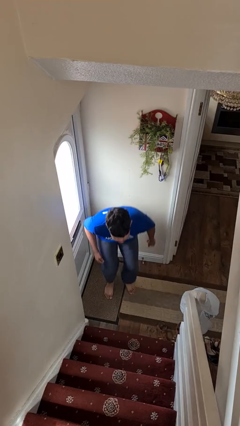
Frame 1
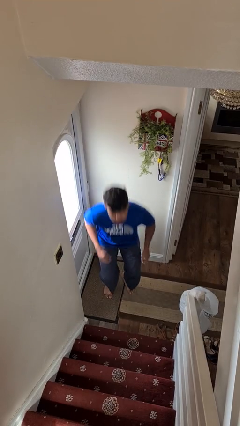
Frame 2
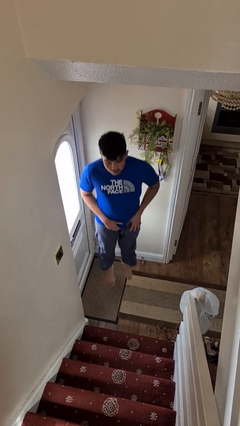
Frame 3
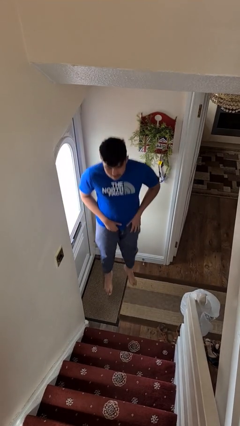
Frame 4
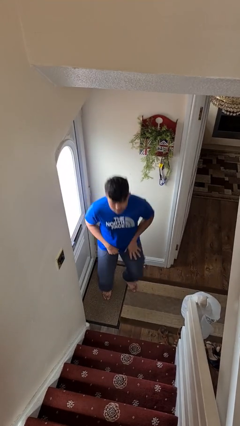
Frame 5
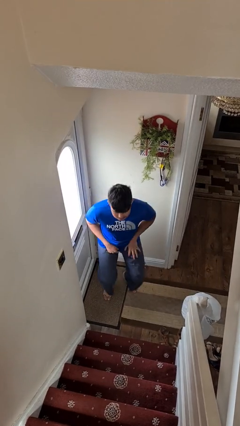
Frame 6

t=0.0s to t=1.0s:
person jumps

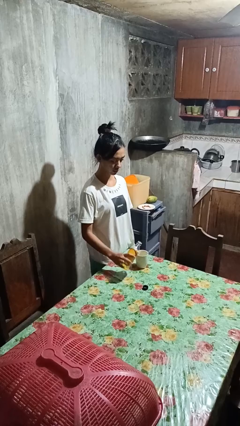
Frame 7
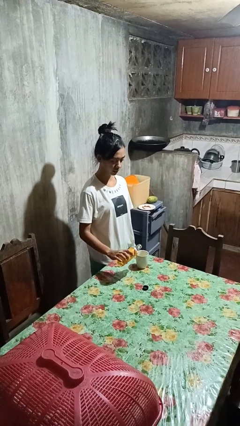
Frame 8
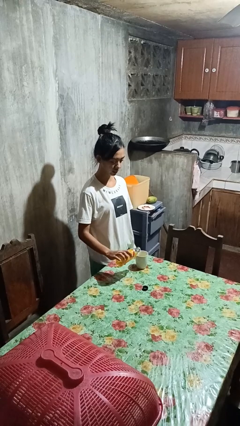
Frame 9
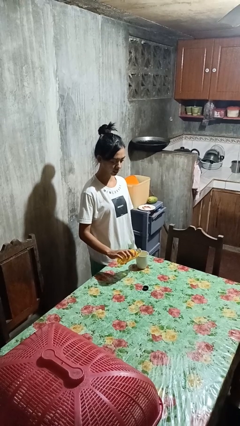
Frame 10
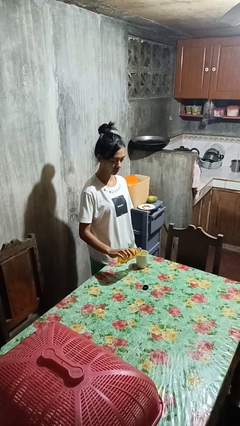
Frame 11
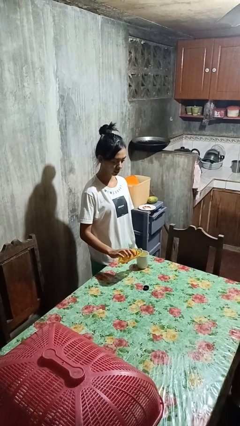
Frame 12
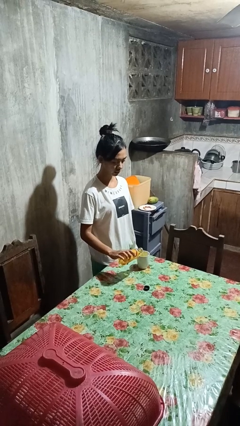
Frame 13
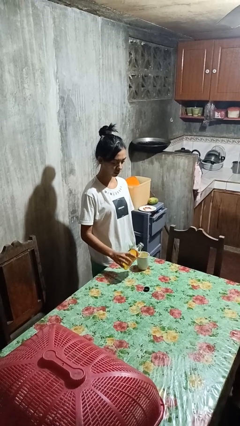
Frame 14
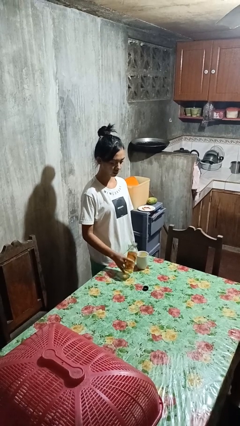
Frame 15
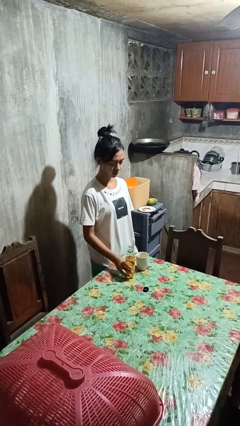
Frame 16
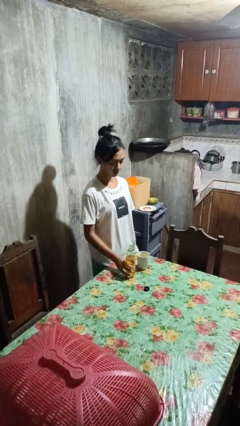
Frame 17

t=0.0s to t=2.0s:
person pours liquid into cup

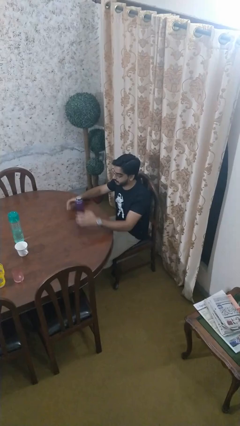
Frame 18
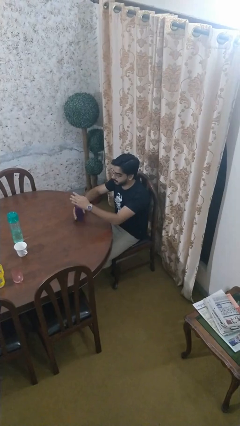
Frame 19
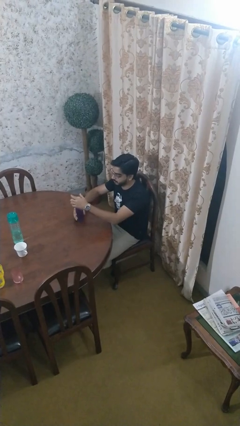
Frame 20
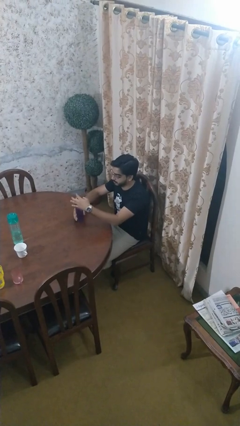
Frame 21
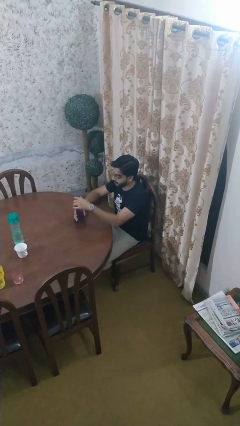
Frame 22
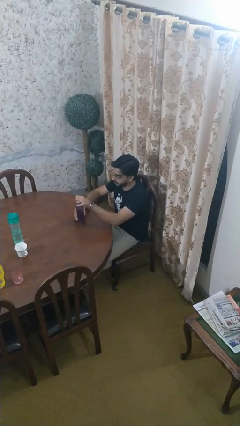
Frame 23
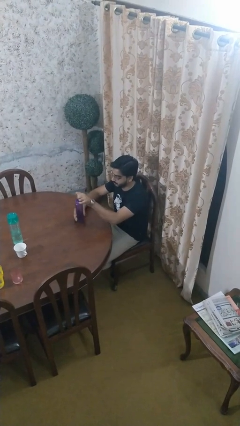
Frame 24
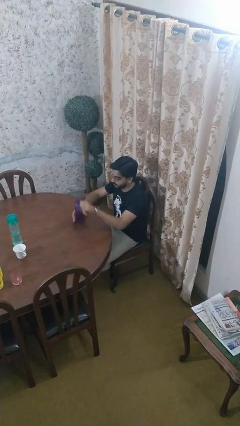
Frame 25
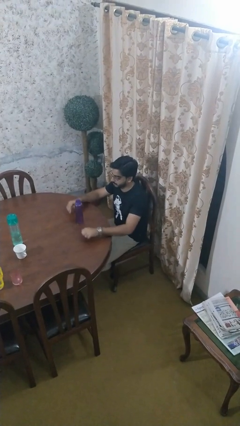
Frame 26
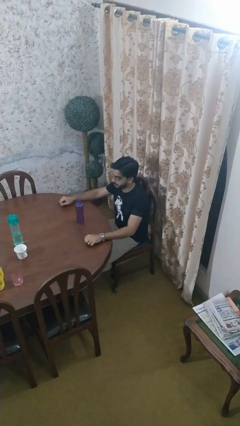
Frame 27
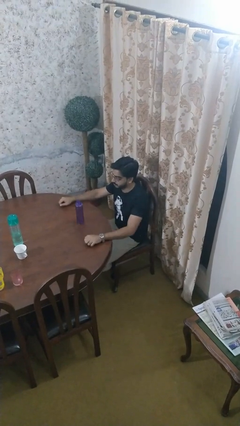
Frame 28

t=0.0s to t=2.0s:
person unscrews lid from bottle

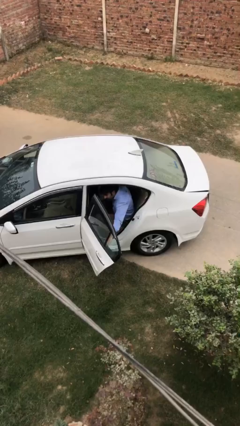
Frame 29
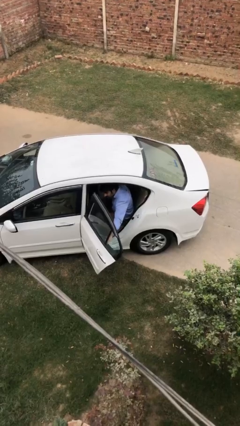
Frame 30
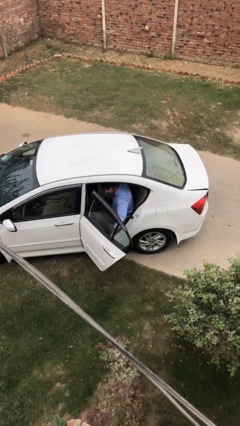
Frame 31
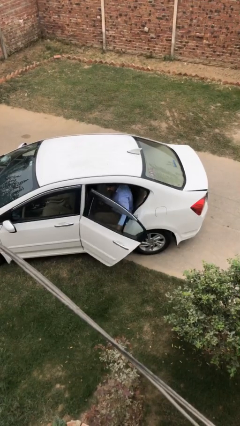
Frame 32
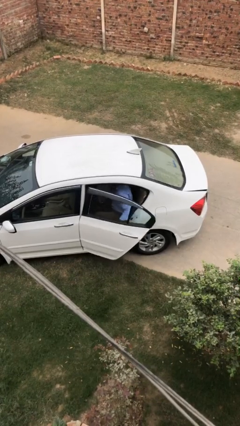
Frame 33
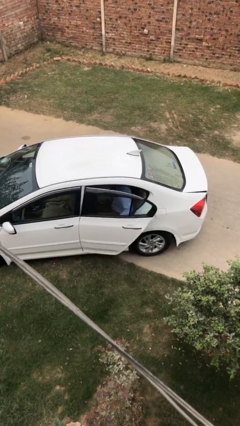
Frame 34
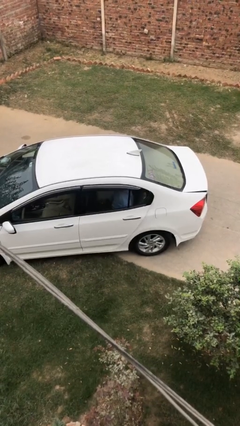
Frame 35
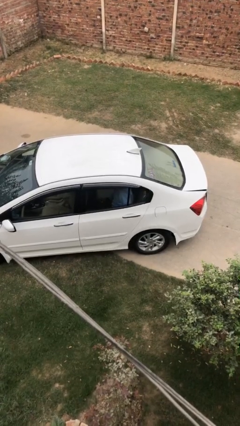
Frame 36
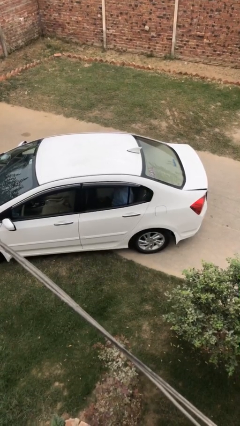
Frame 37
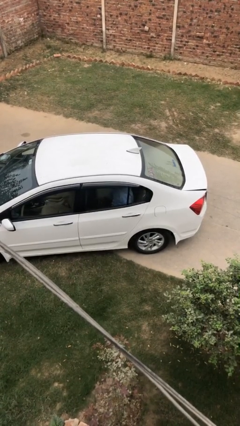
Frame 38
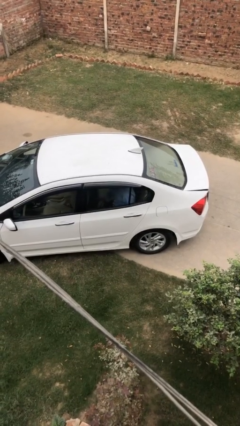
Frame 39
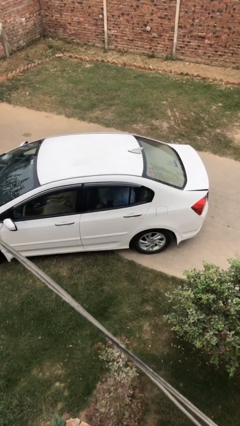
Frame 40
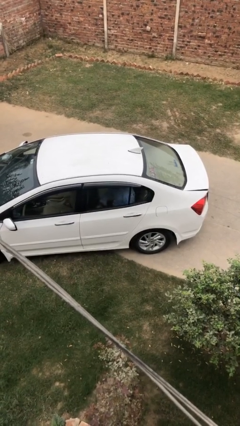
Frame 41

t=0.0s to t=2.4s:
person closes car door

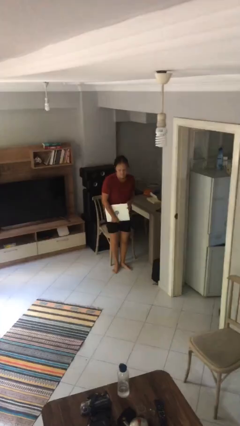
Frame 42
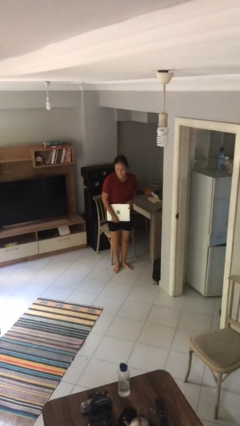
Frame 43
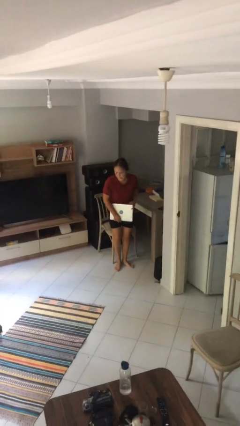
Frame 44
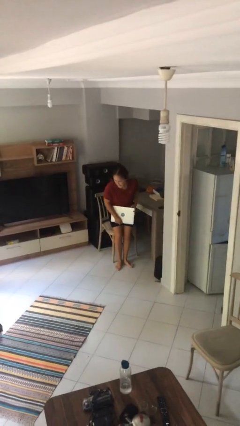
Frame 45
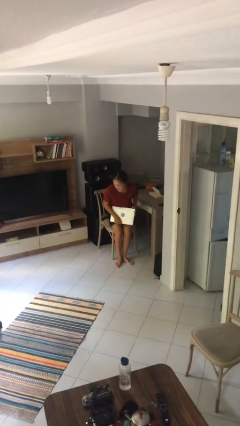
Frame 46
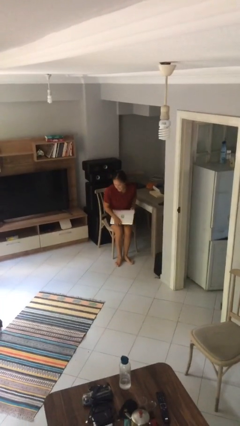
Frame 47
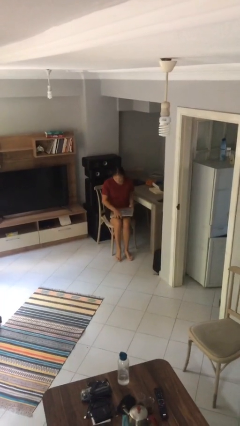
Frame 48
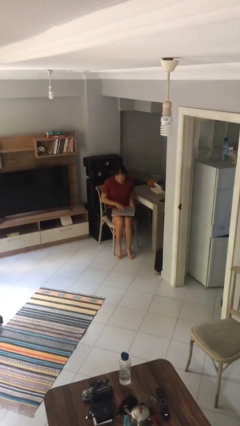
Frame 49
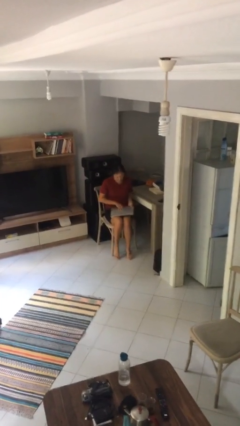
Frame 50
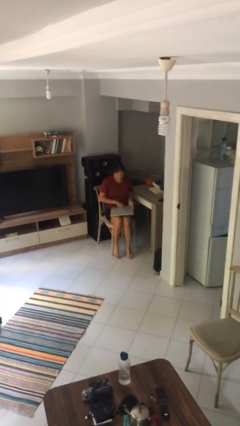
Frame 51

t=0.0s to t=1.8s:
person sits down

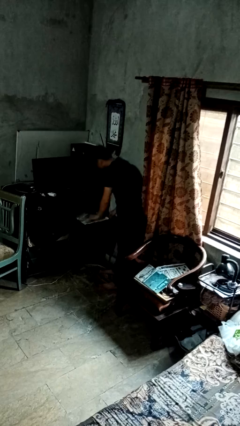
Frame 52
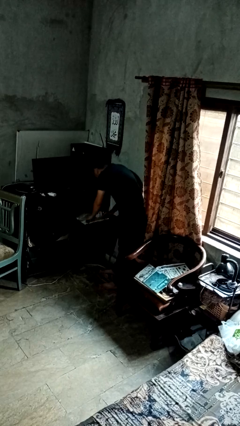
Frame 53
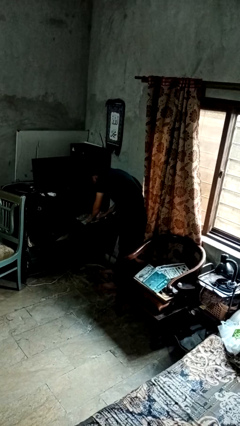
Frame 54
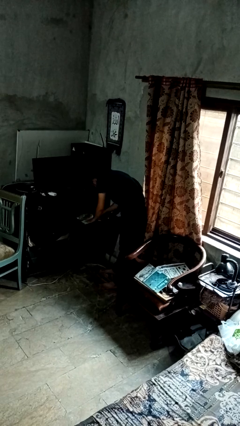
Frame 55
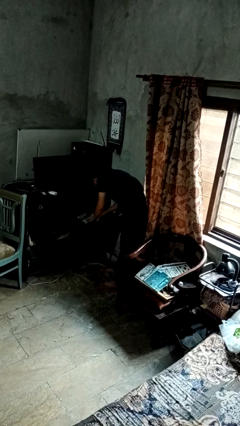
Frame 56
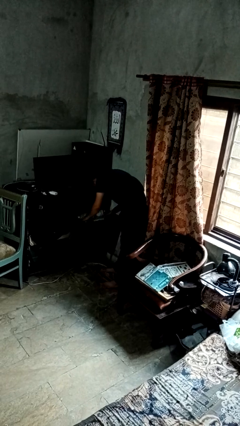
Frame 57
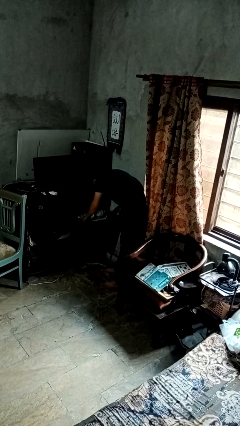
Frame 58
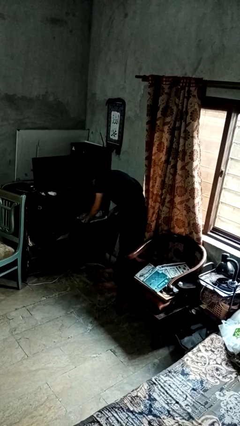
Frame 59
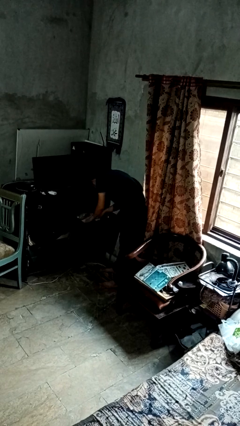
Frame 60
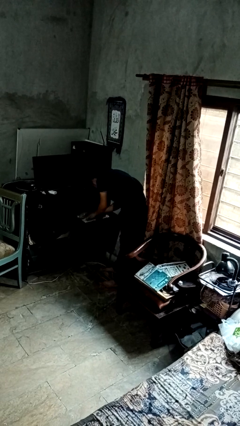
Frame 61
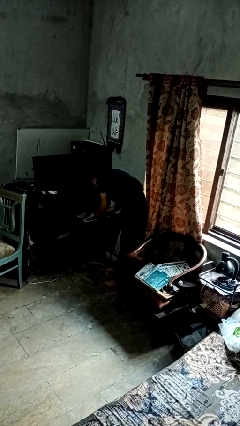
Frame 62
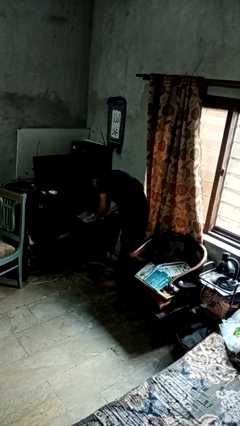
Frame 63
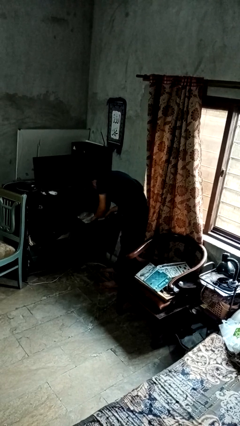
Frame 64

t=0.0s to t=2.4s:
person searches in cabinet

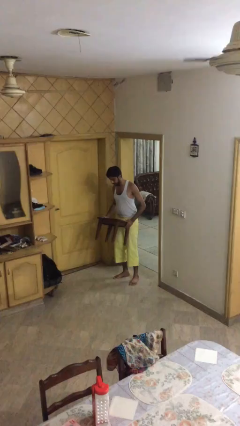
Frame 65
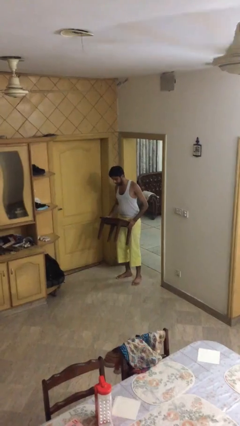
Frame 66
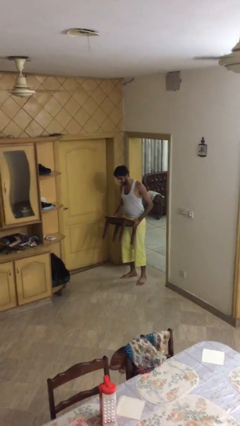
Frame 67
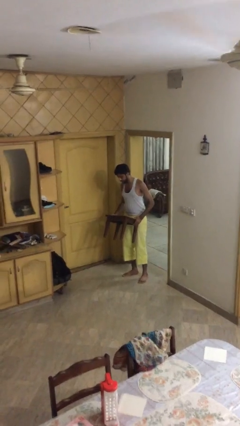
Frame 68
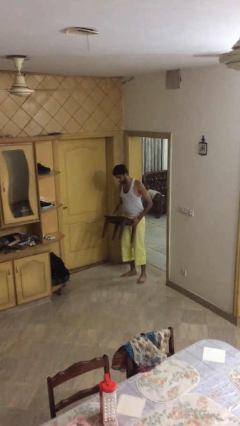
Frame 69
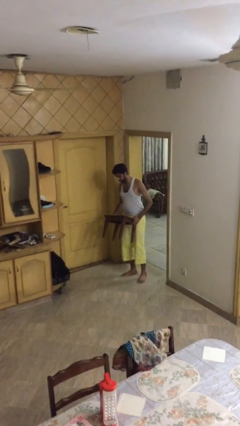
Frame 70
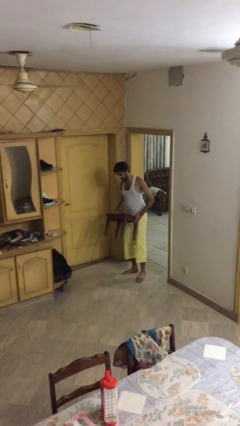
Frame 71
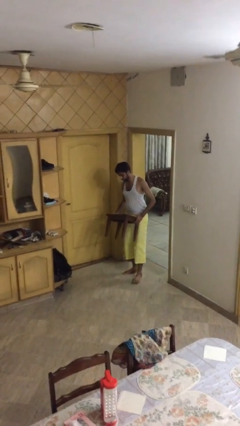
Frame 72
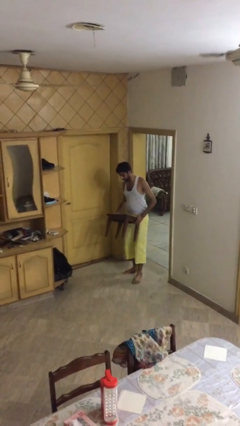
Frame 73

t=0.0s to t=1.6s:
person carries heavy object

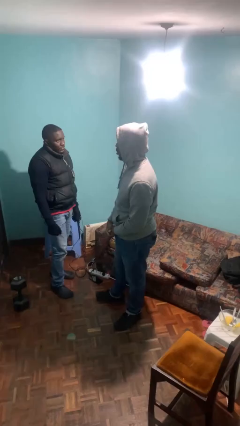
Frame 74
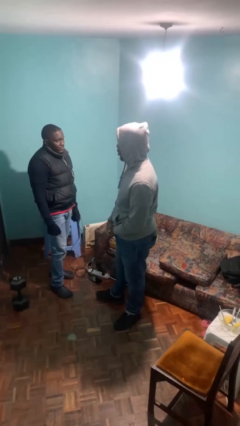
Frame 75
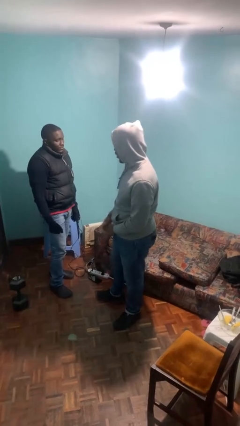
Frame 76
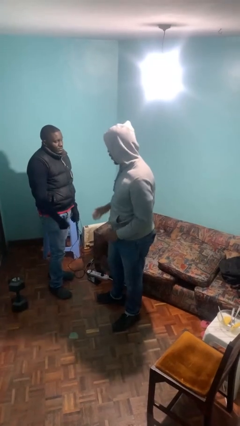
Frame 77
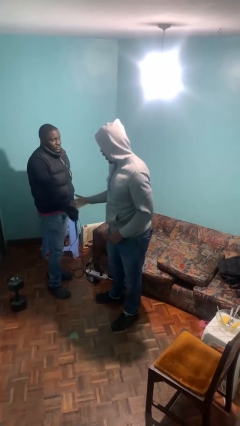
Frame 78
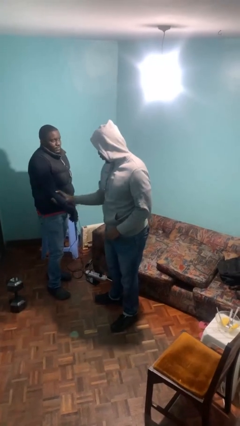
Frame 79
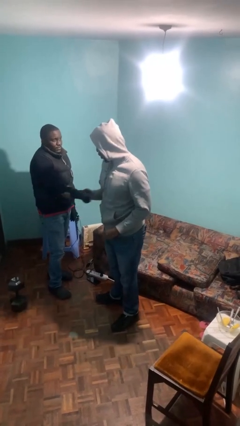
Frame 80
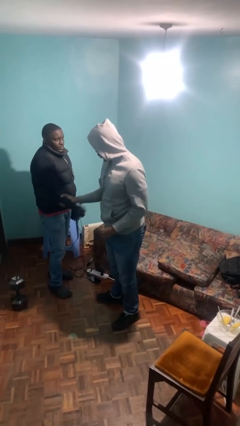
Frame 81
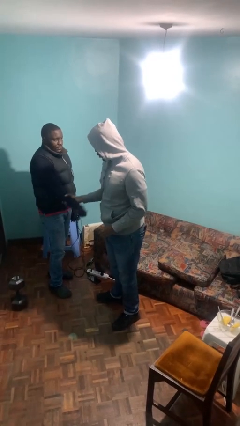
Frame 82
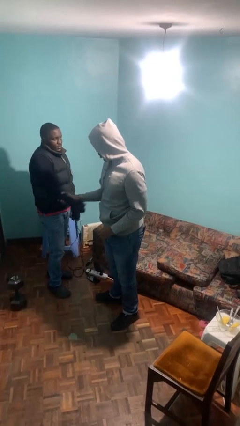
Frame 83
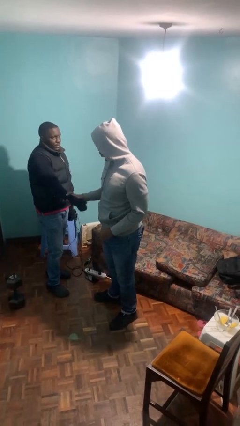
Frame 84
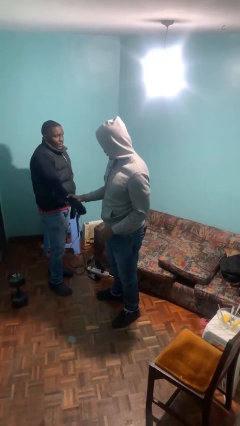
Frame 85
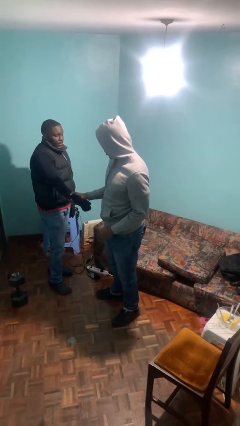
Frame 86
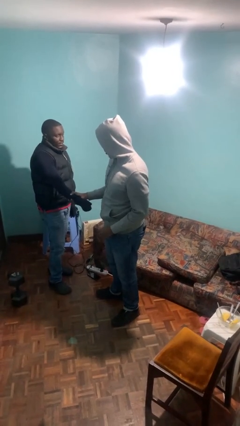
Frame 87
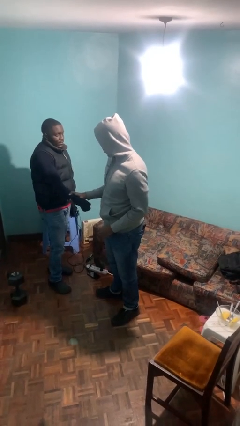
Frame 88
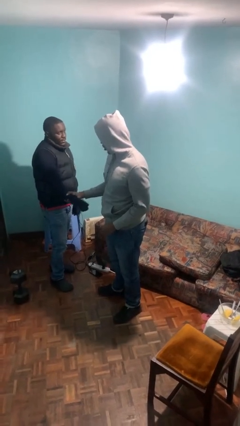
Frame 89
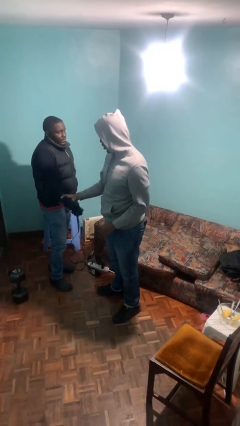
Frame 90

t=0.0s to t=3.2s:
person grabs person by forearm
